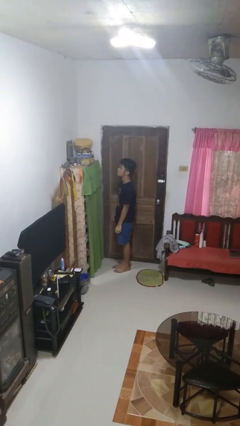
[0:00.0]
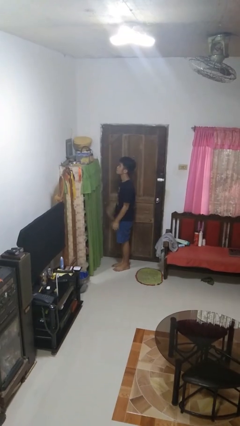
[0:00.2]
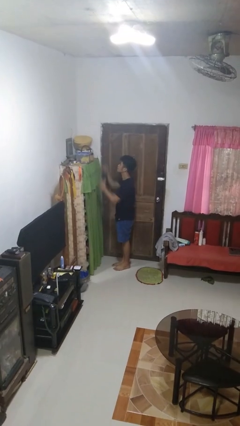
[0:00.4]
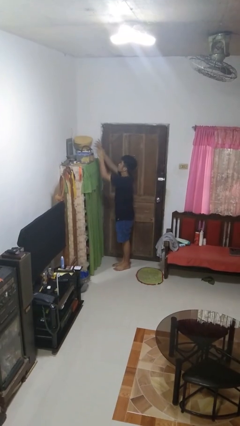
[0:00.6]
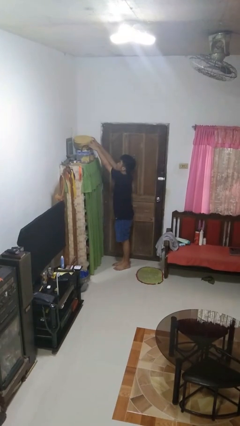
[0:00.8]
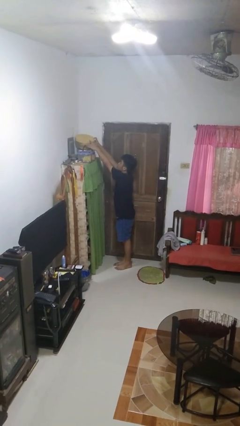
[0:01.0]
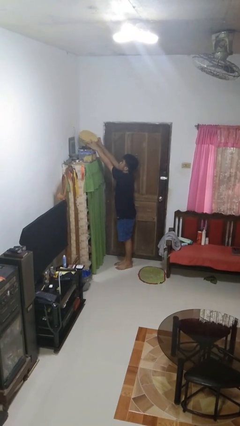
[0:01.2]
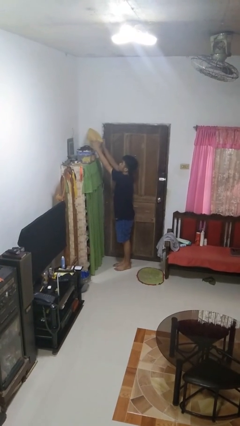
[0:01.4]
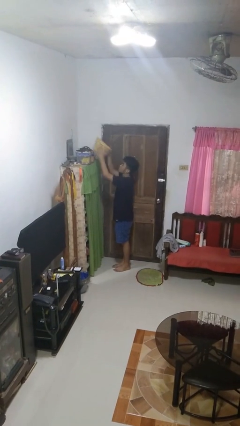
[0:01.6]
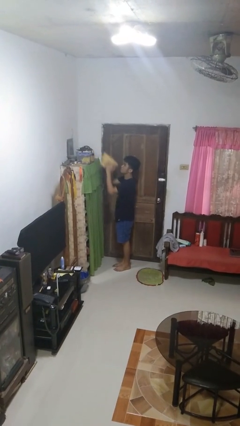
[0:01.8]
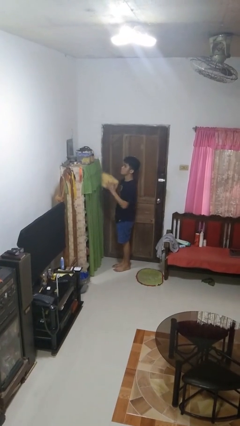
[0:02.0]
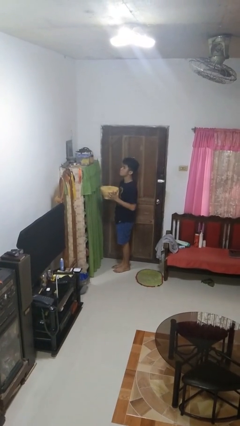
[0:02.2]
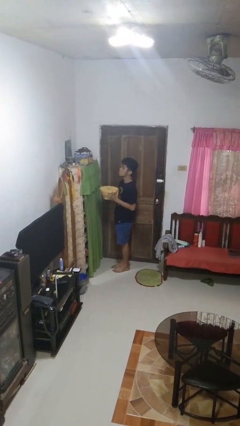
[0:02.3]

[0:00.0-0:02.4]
person picks up object from shelf

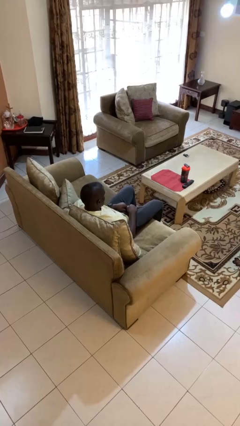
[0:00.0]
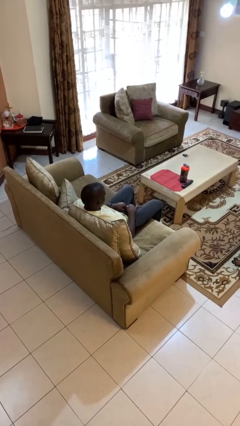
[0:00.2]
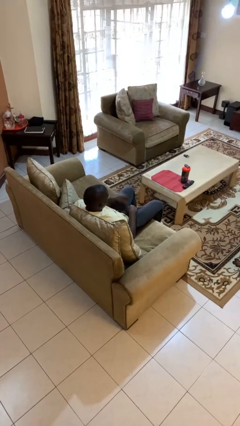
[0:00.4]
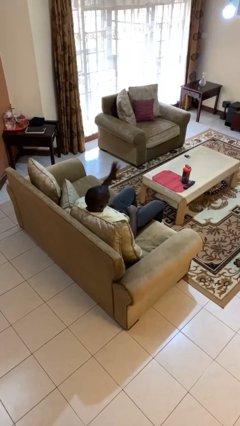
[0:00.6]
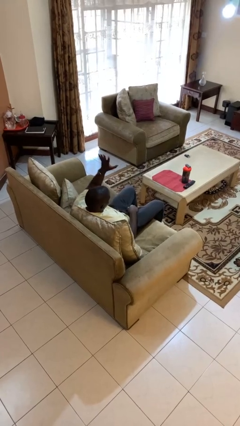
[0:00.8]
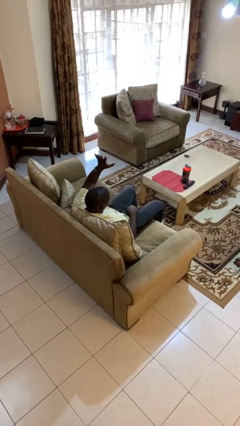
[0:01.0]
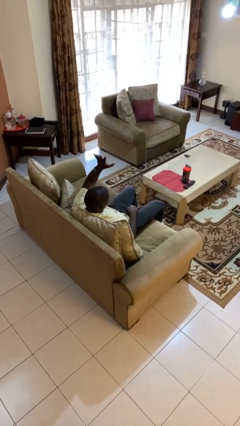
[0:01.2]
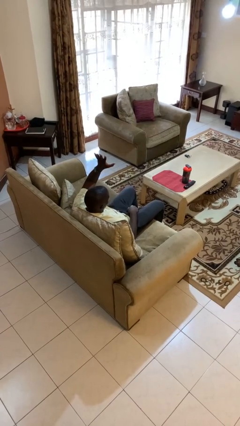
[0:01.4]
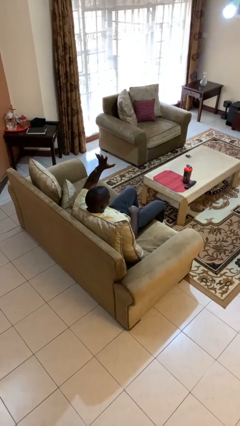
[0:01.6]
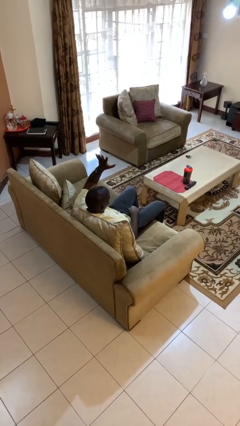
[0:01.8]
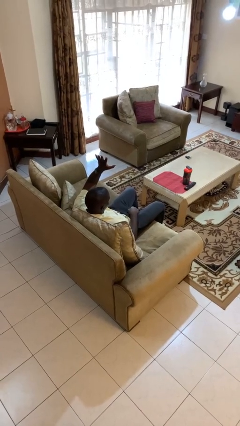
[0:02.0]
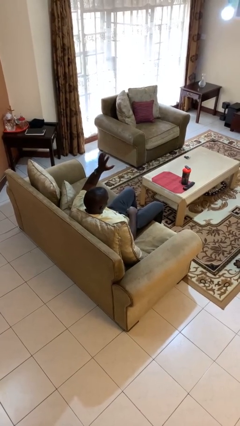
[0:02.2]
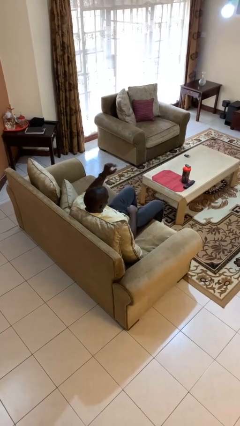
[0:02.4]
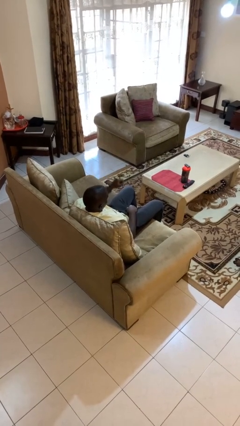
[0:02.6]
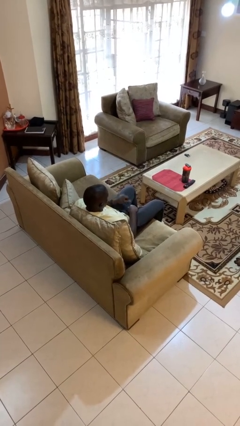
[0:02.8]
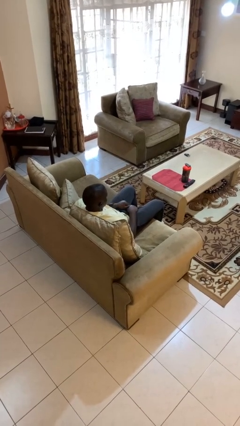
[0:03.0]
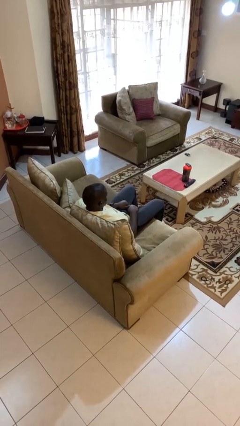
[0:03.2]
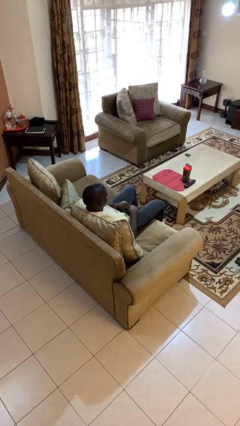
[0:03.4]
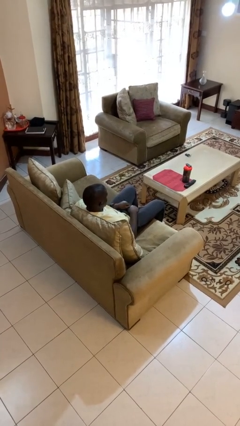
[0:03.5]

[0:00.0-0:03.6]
person gestures number five

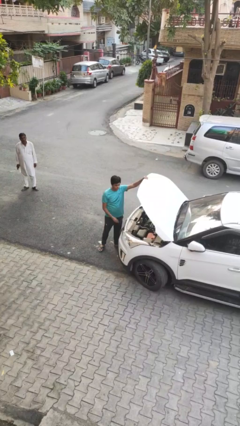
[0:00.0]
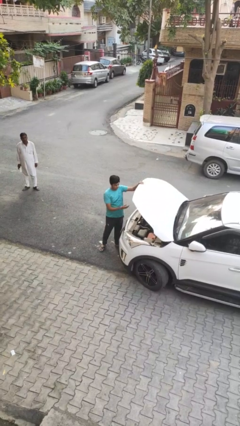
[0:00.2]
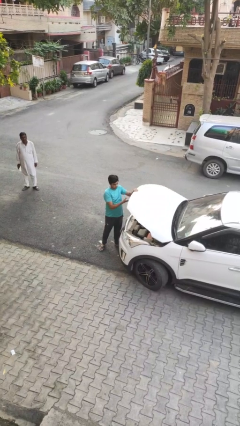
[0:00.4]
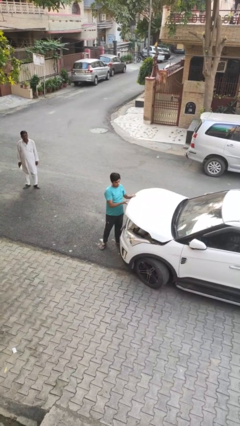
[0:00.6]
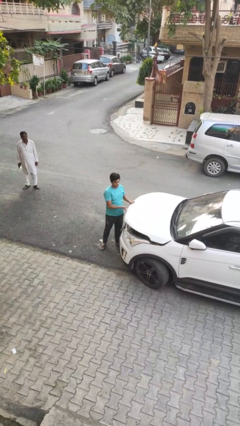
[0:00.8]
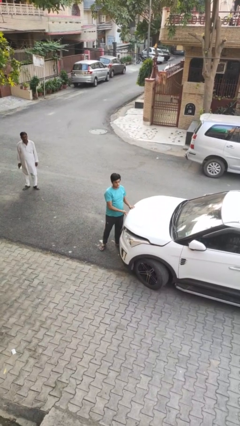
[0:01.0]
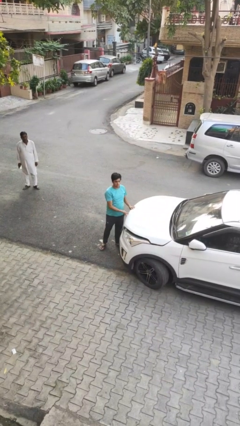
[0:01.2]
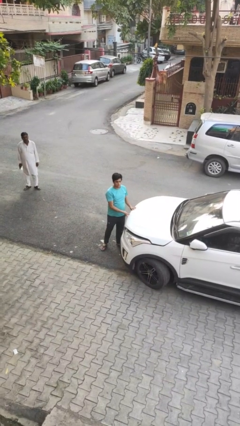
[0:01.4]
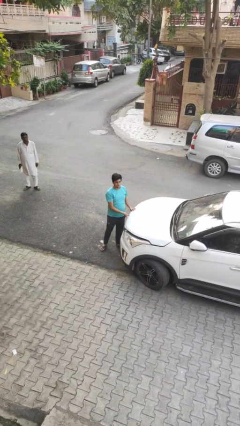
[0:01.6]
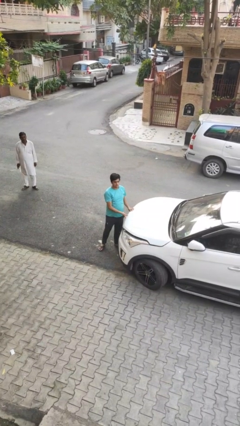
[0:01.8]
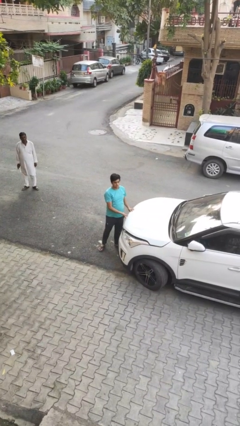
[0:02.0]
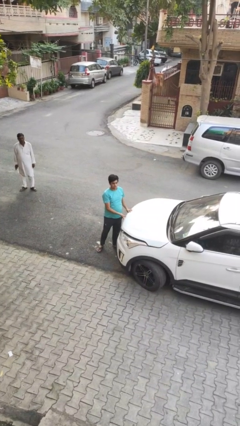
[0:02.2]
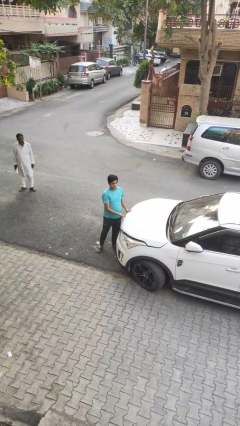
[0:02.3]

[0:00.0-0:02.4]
person closes car hood

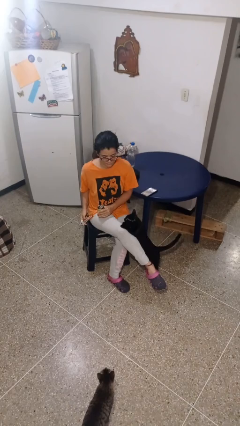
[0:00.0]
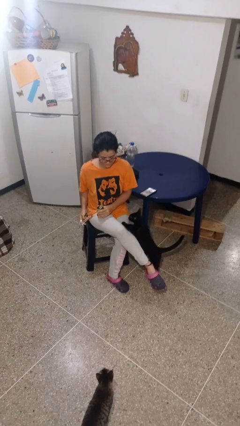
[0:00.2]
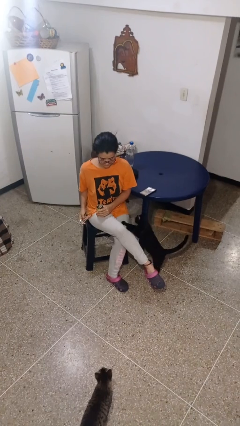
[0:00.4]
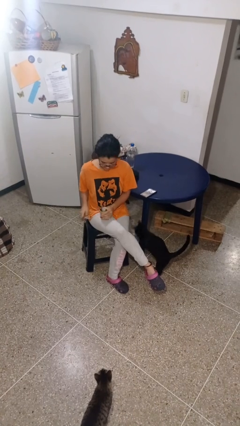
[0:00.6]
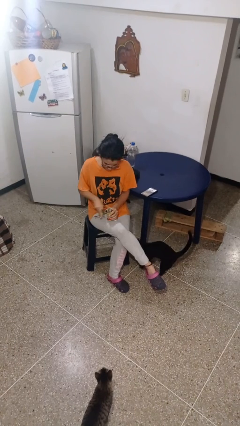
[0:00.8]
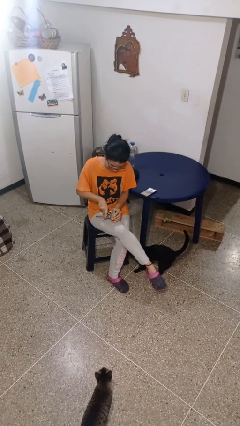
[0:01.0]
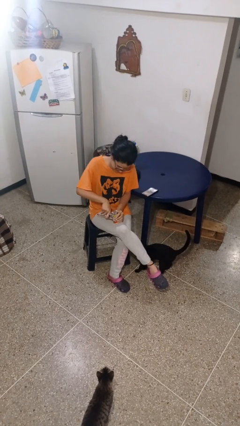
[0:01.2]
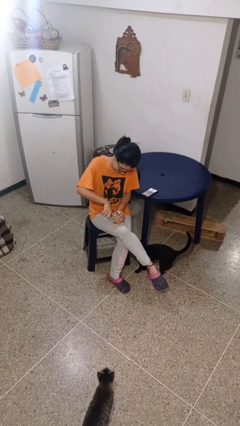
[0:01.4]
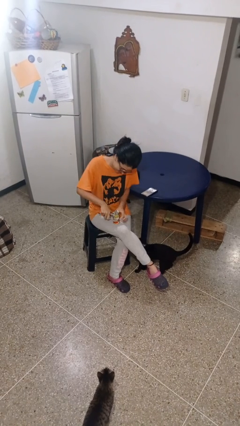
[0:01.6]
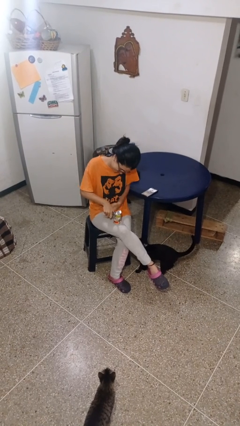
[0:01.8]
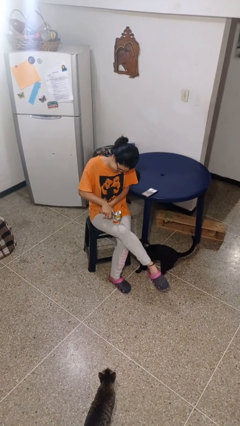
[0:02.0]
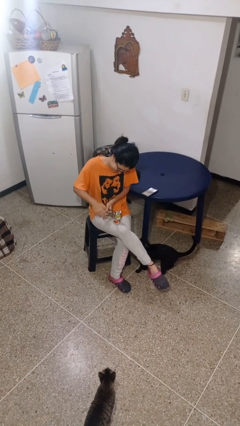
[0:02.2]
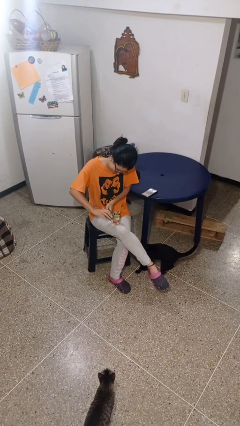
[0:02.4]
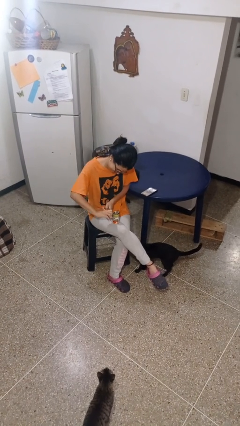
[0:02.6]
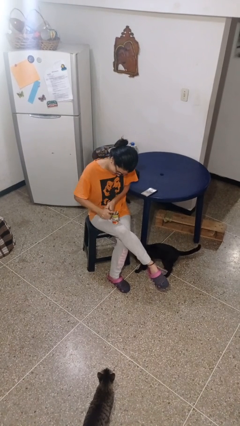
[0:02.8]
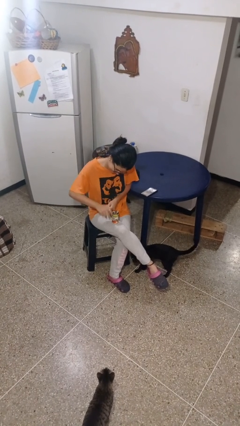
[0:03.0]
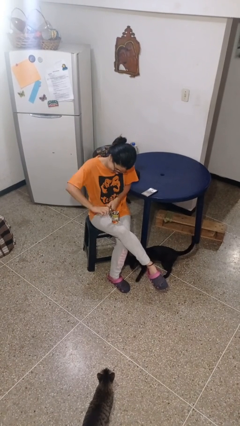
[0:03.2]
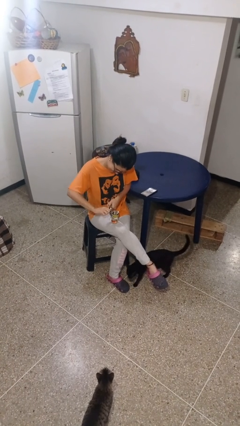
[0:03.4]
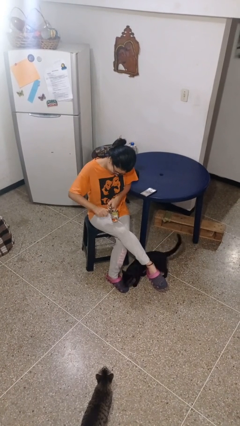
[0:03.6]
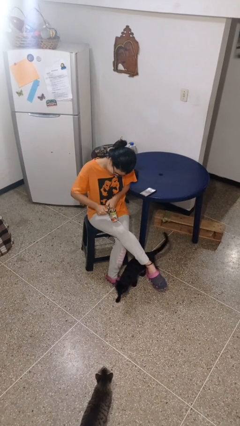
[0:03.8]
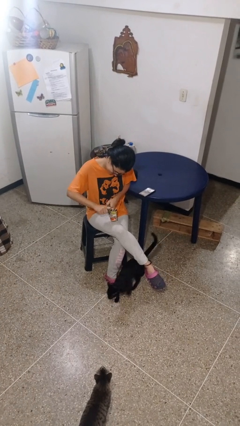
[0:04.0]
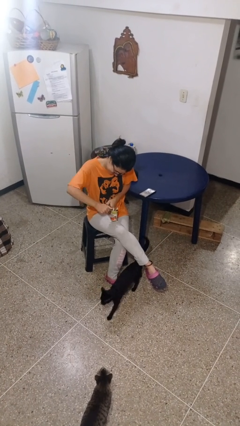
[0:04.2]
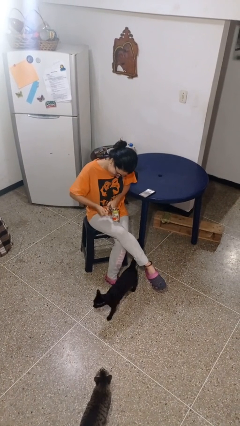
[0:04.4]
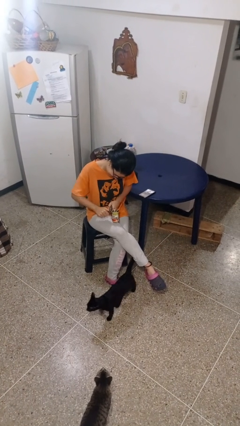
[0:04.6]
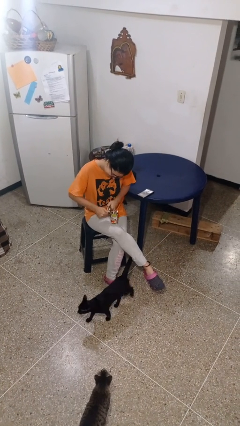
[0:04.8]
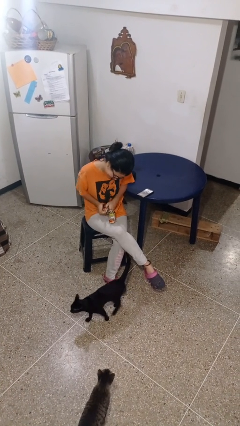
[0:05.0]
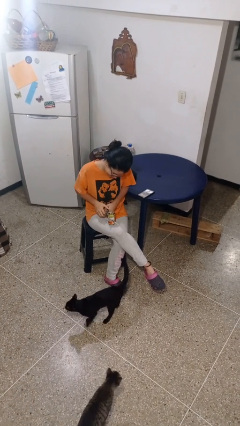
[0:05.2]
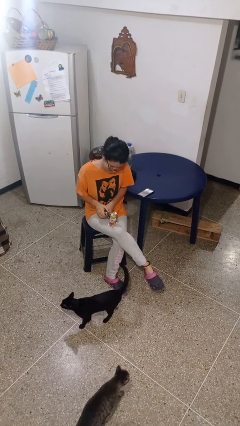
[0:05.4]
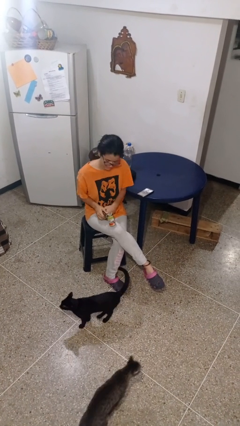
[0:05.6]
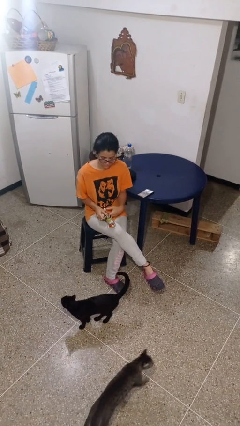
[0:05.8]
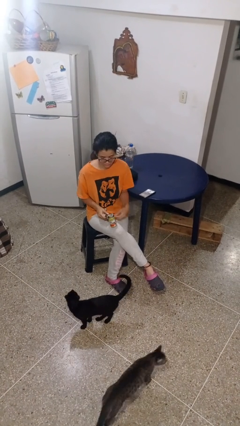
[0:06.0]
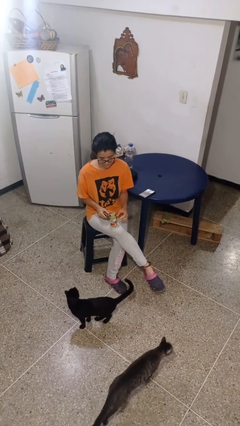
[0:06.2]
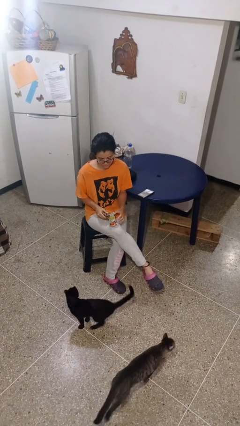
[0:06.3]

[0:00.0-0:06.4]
person opens can with can opener

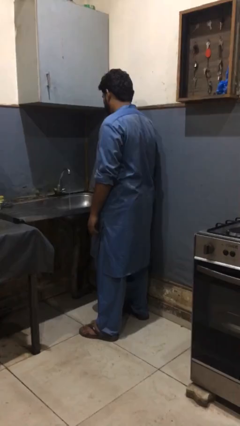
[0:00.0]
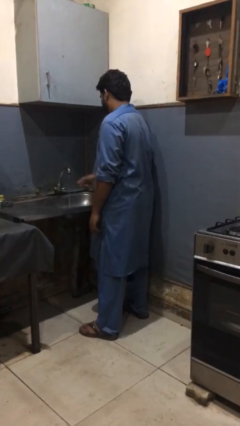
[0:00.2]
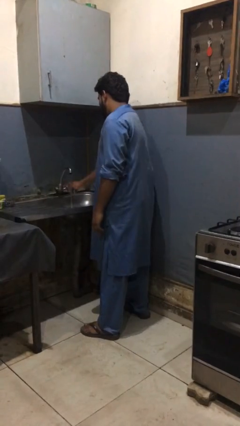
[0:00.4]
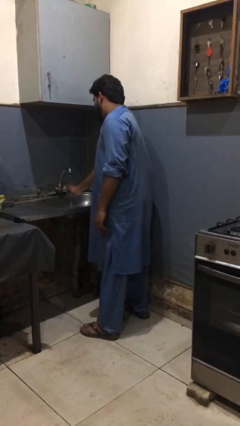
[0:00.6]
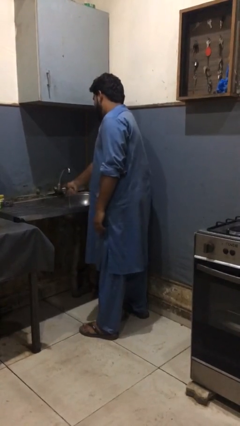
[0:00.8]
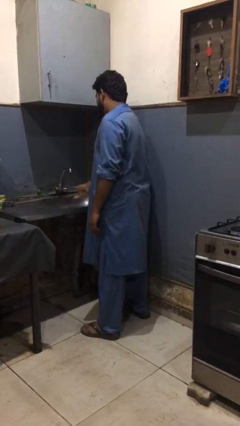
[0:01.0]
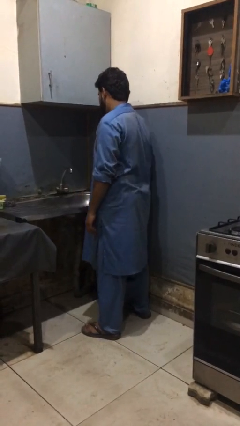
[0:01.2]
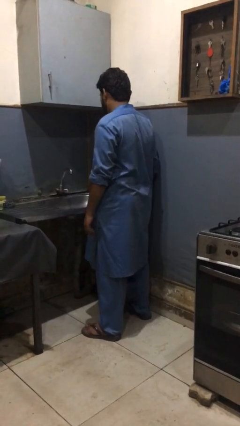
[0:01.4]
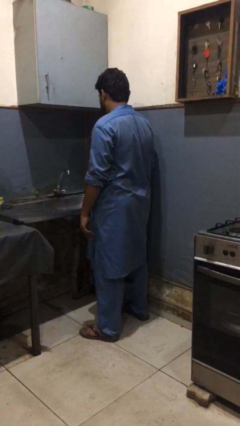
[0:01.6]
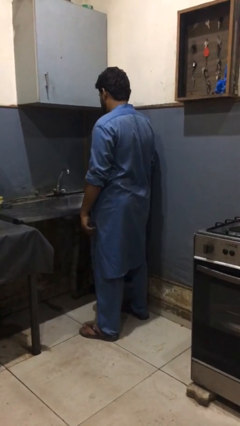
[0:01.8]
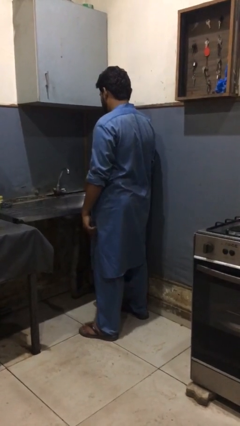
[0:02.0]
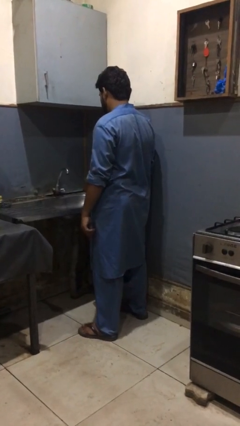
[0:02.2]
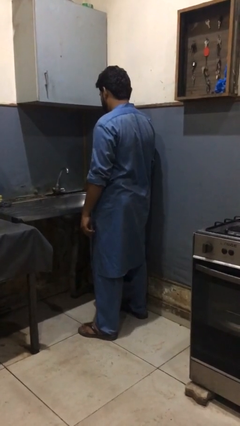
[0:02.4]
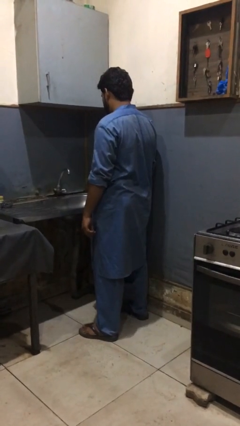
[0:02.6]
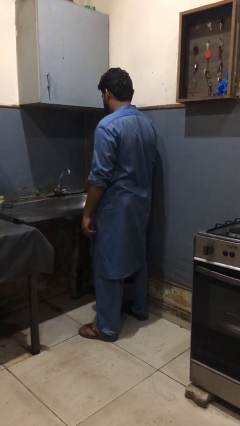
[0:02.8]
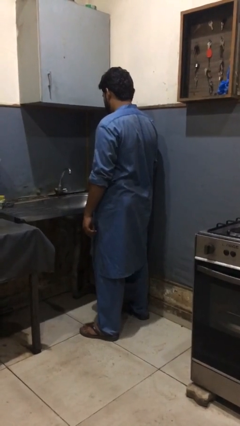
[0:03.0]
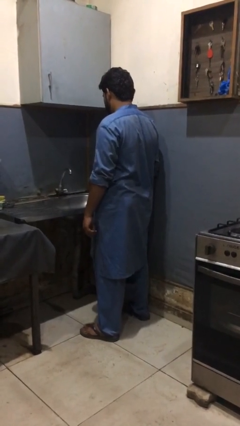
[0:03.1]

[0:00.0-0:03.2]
person turns on faucet
